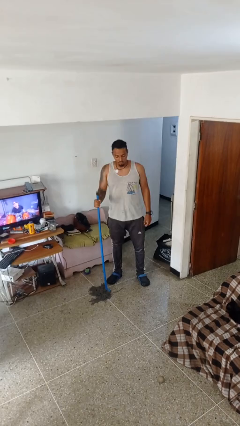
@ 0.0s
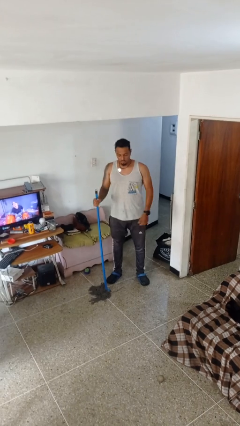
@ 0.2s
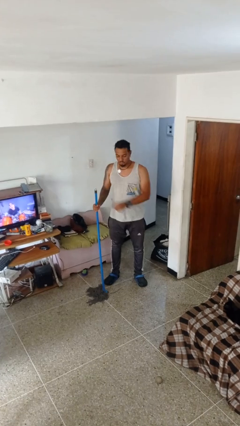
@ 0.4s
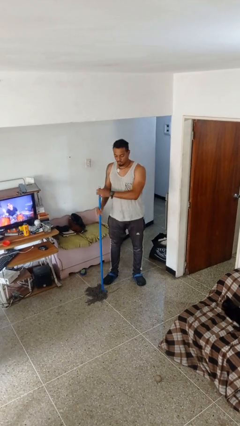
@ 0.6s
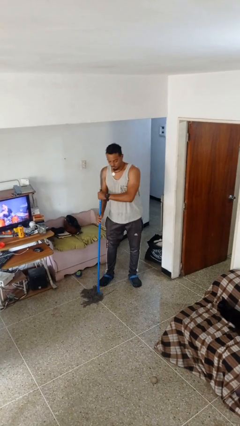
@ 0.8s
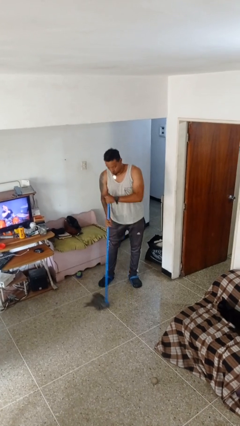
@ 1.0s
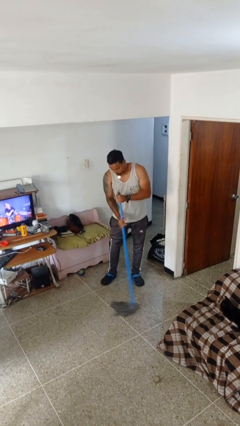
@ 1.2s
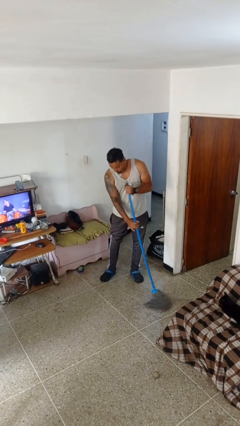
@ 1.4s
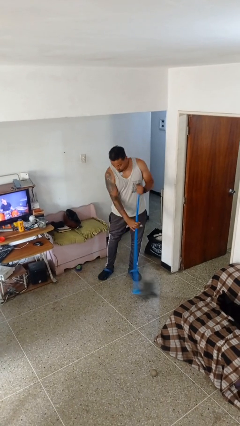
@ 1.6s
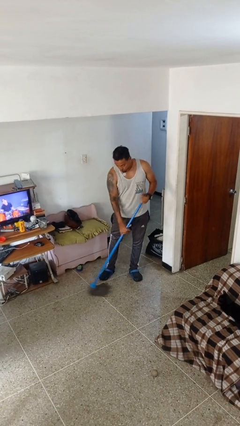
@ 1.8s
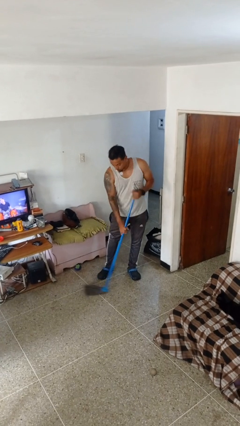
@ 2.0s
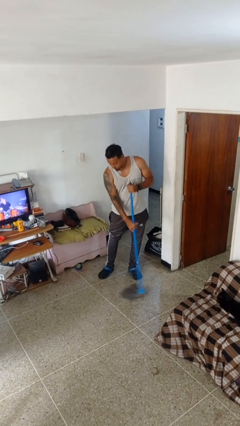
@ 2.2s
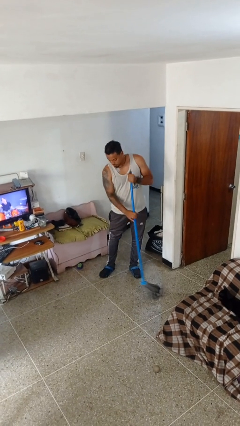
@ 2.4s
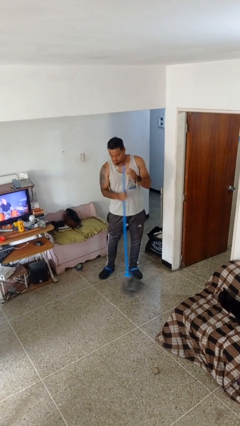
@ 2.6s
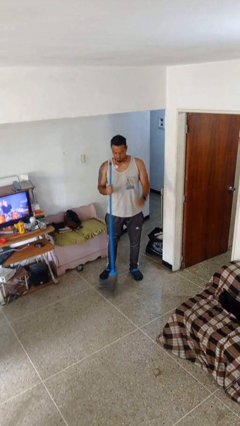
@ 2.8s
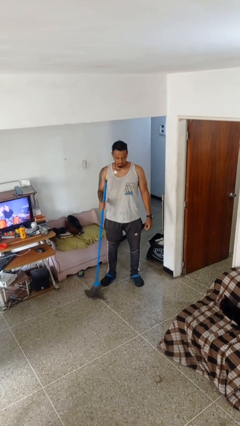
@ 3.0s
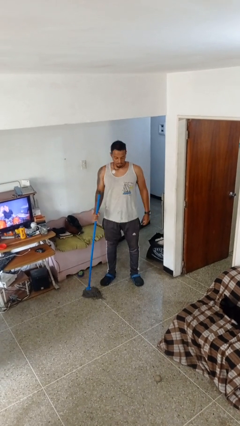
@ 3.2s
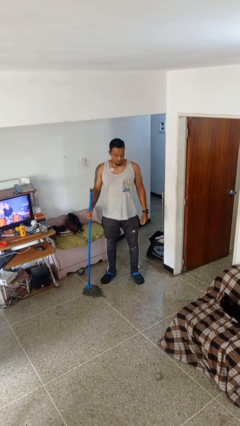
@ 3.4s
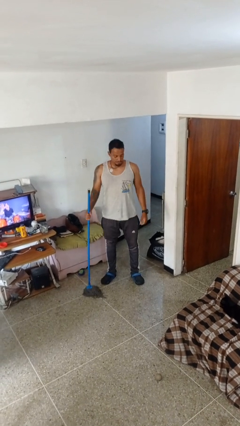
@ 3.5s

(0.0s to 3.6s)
person mops

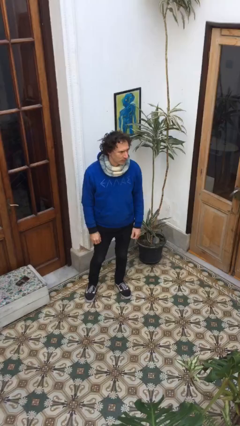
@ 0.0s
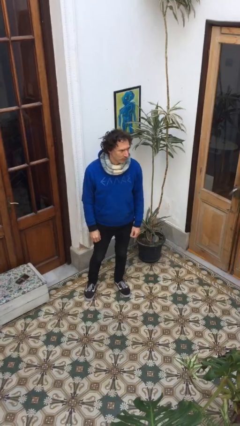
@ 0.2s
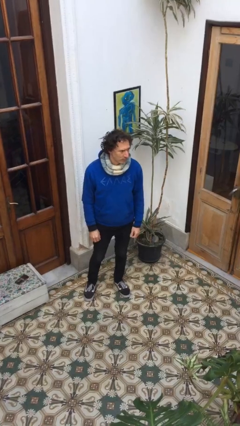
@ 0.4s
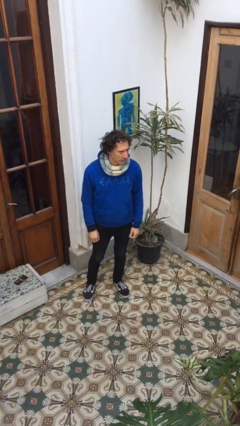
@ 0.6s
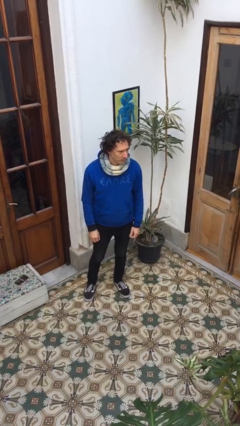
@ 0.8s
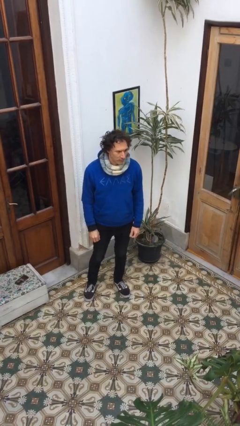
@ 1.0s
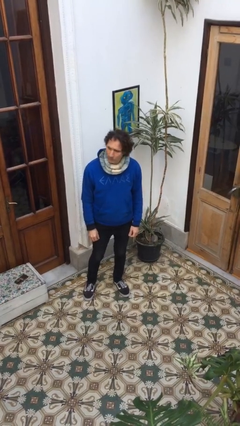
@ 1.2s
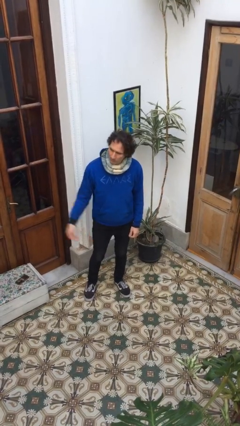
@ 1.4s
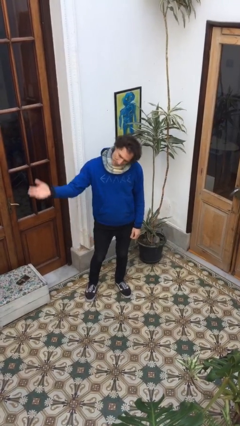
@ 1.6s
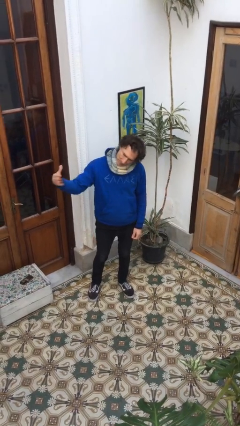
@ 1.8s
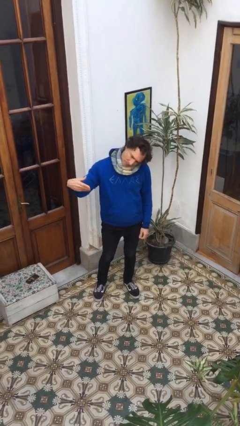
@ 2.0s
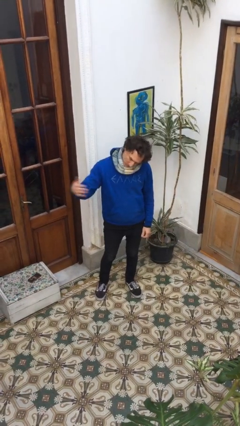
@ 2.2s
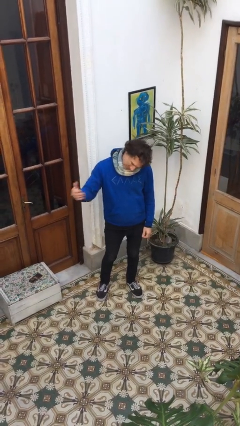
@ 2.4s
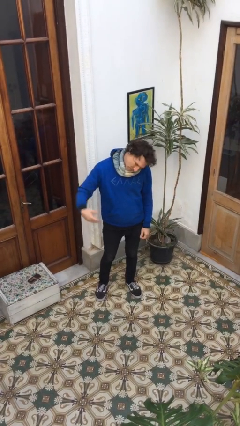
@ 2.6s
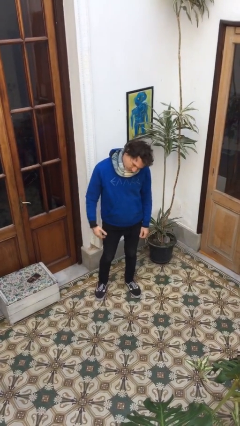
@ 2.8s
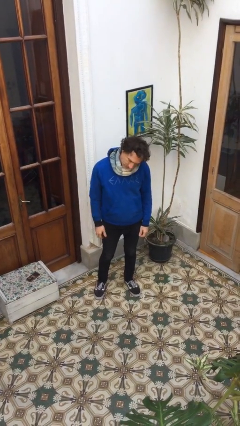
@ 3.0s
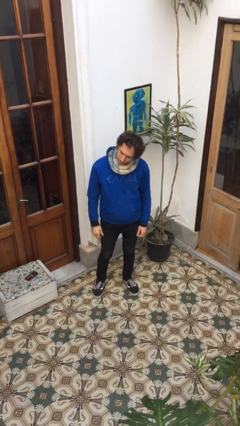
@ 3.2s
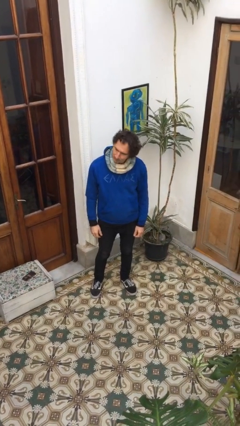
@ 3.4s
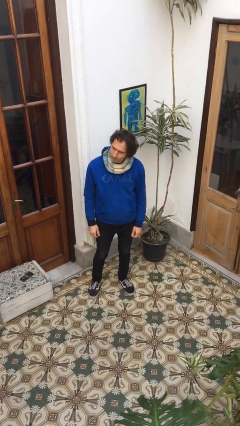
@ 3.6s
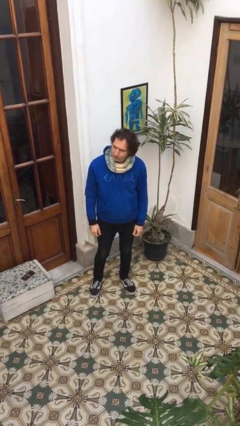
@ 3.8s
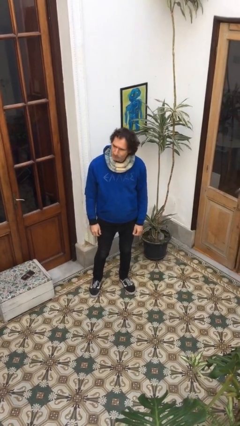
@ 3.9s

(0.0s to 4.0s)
person gestures come here

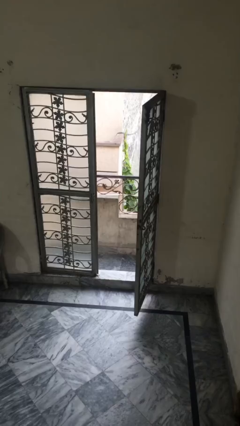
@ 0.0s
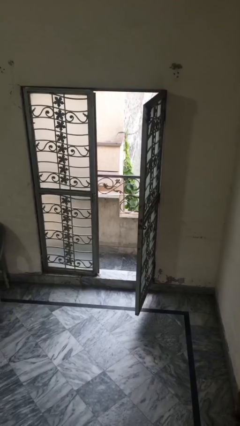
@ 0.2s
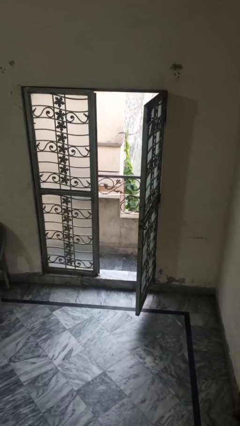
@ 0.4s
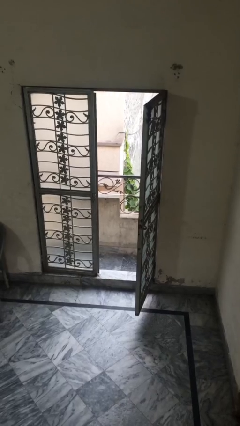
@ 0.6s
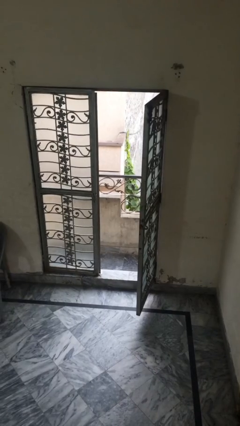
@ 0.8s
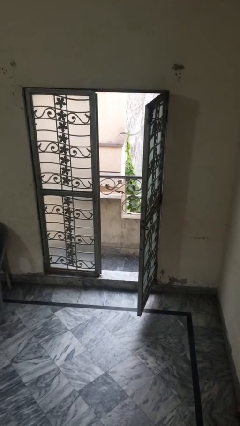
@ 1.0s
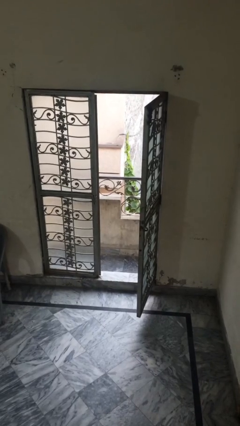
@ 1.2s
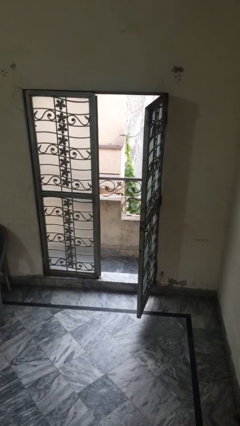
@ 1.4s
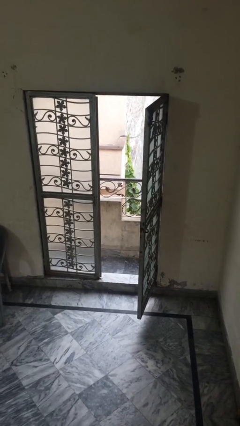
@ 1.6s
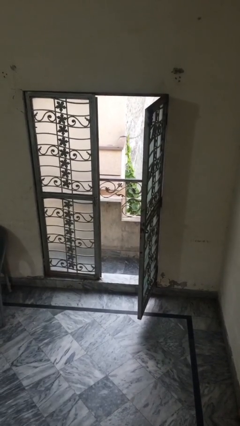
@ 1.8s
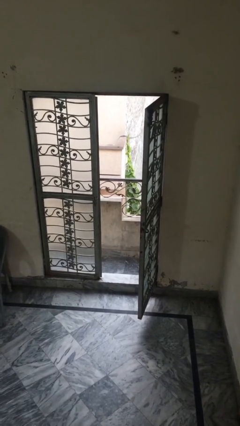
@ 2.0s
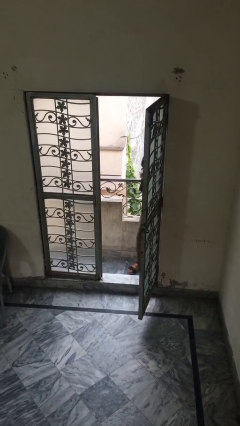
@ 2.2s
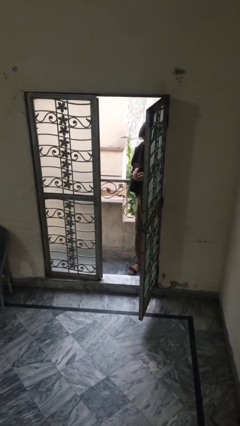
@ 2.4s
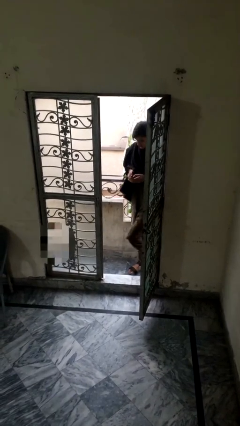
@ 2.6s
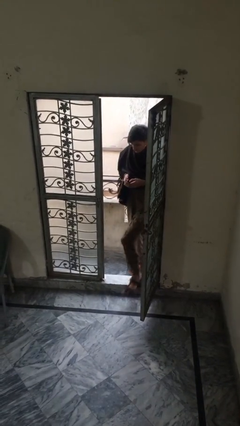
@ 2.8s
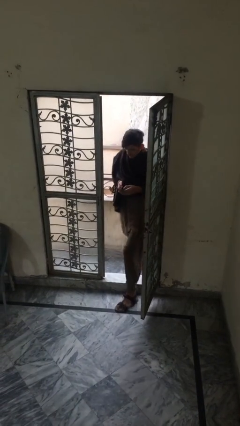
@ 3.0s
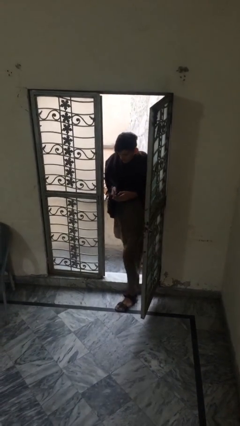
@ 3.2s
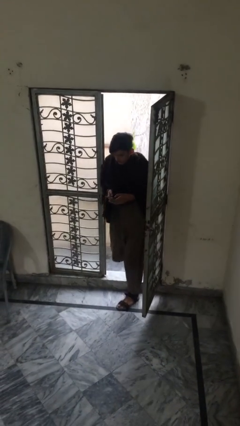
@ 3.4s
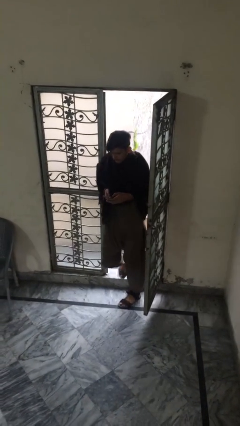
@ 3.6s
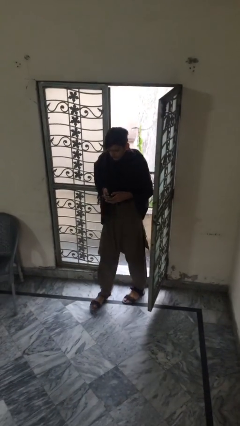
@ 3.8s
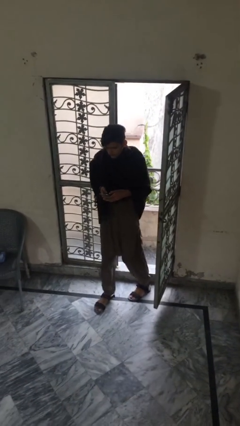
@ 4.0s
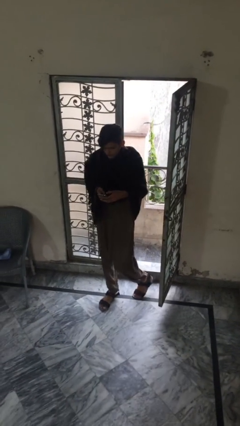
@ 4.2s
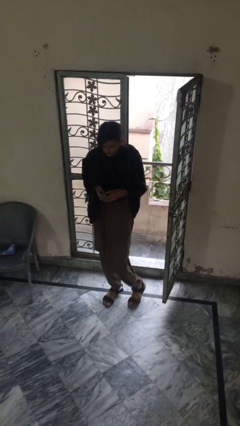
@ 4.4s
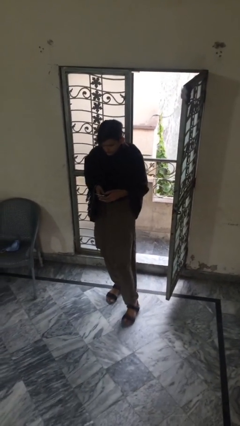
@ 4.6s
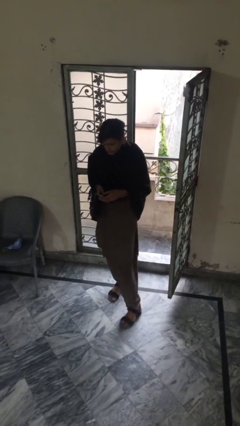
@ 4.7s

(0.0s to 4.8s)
person enters scene through structure

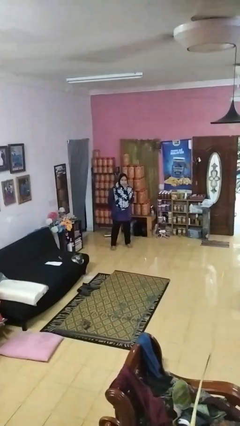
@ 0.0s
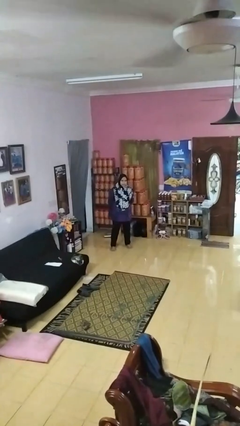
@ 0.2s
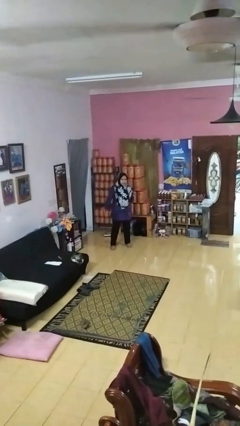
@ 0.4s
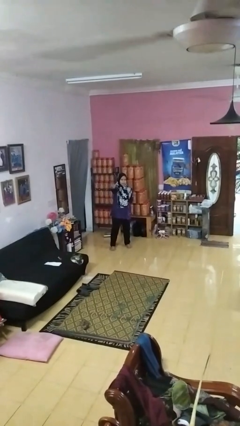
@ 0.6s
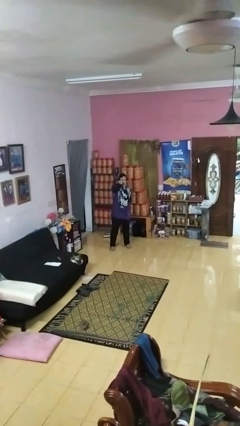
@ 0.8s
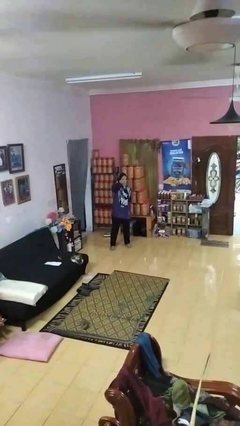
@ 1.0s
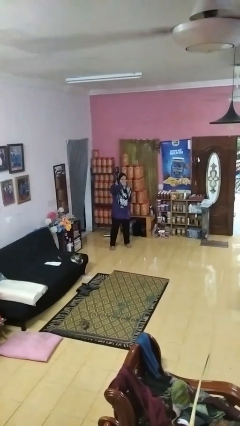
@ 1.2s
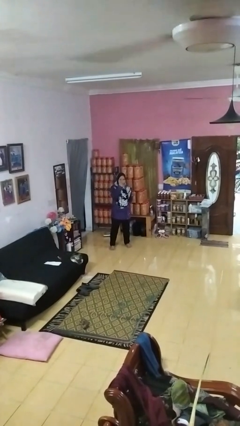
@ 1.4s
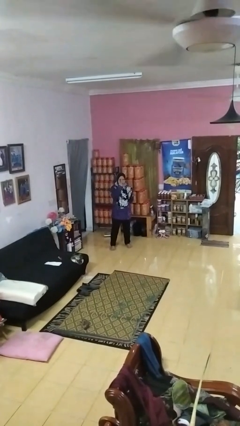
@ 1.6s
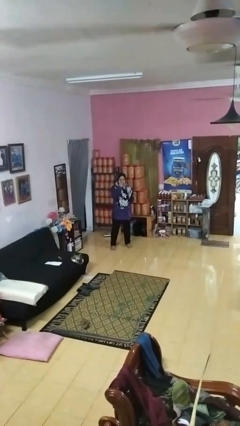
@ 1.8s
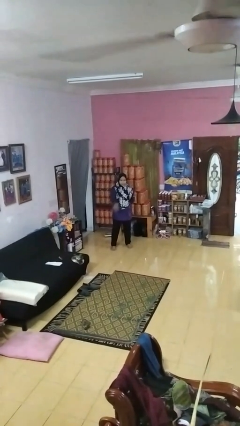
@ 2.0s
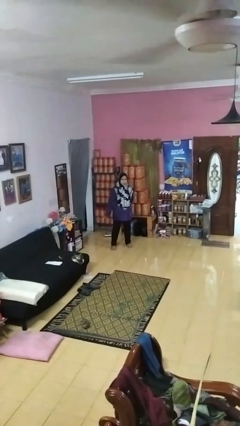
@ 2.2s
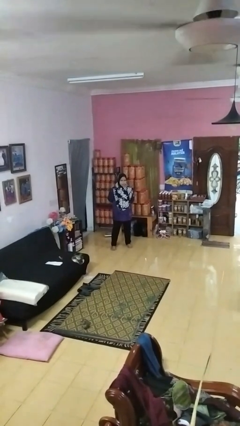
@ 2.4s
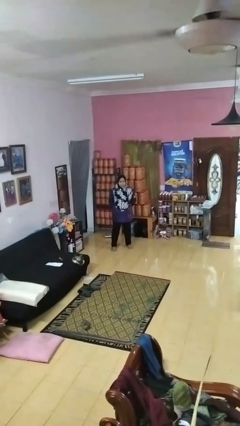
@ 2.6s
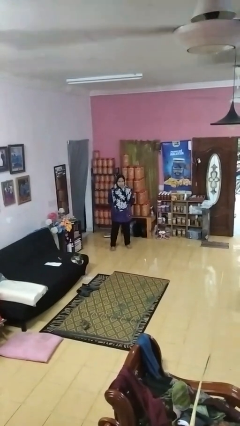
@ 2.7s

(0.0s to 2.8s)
person gestures watch closely

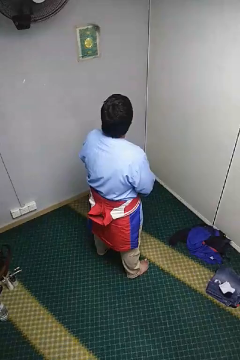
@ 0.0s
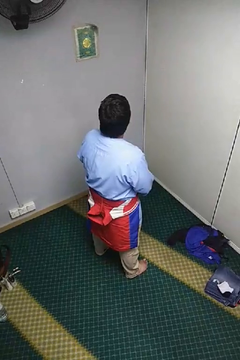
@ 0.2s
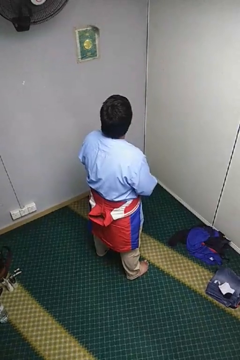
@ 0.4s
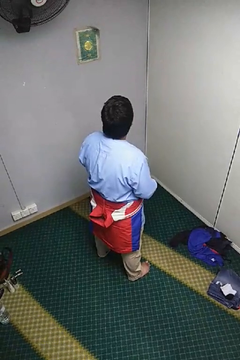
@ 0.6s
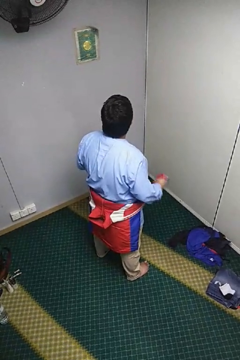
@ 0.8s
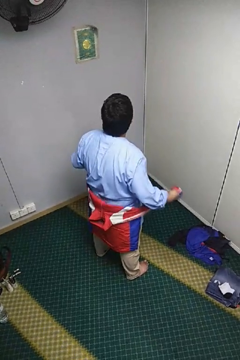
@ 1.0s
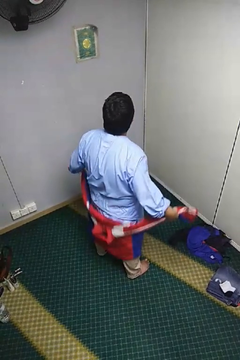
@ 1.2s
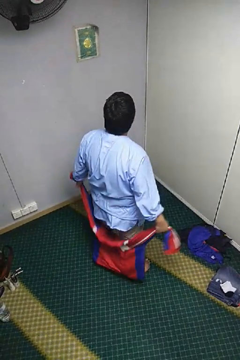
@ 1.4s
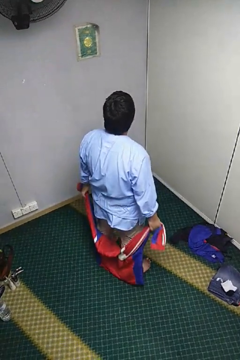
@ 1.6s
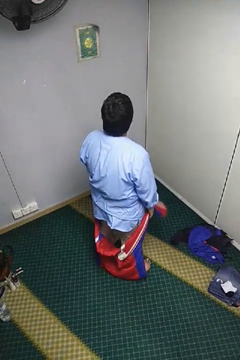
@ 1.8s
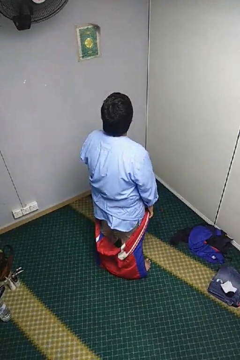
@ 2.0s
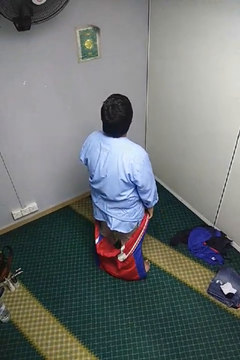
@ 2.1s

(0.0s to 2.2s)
person unties jacket around waist

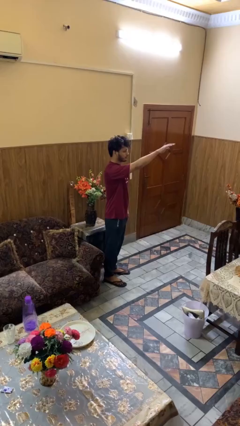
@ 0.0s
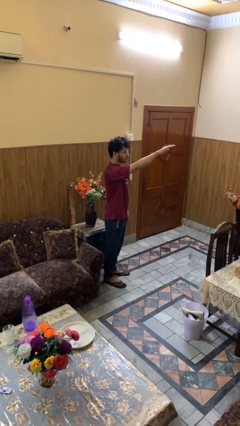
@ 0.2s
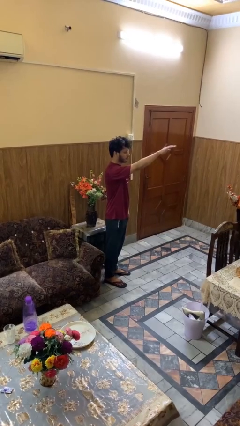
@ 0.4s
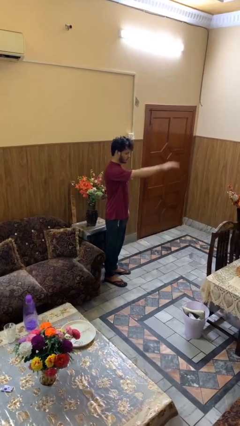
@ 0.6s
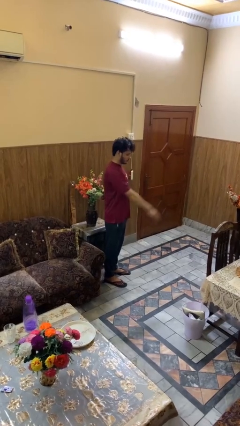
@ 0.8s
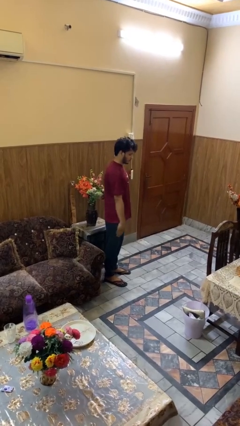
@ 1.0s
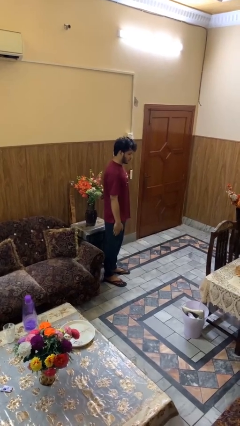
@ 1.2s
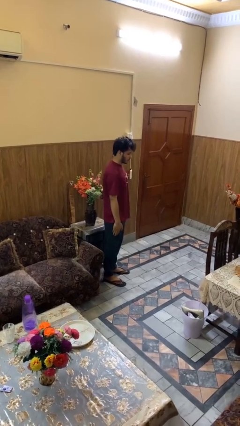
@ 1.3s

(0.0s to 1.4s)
person gestures swipe down
